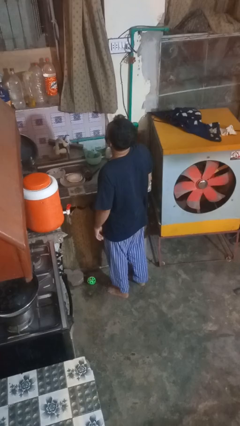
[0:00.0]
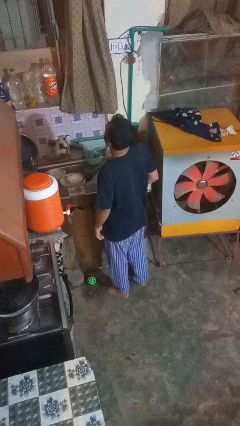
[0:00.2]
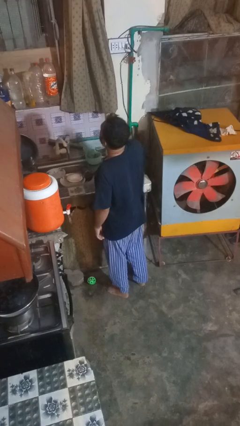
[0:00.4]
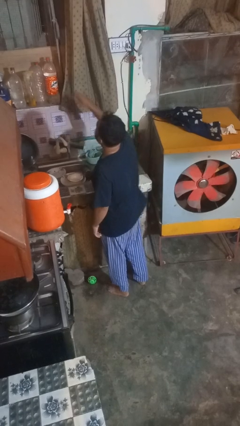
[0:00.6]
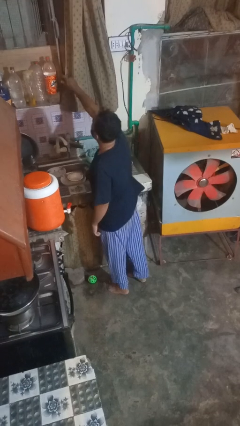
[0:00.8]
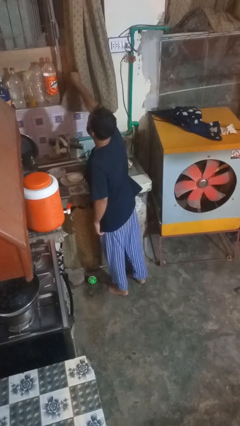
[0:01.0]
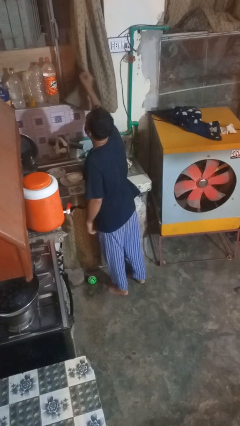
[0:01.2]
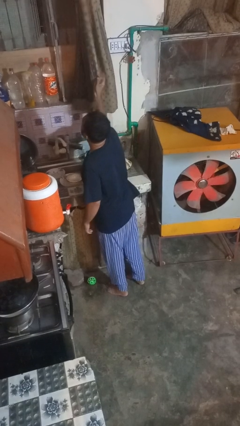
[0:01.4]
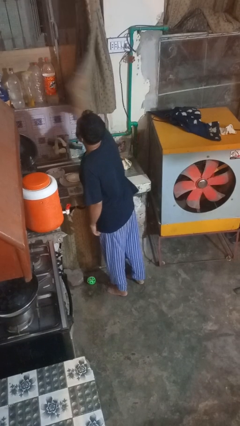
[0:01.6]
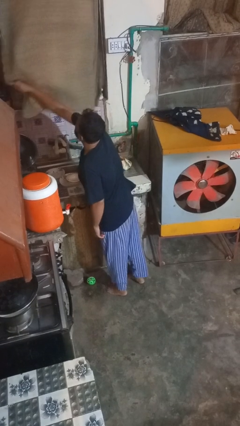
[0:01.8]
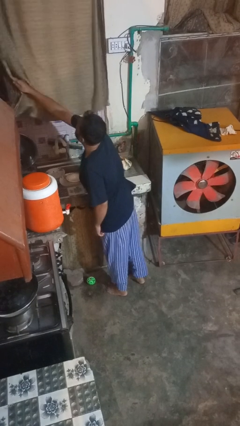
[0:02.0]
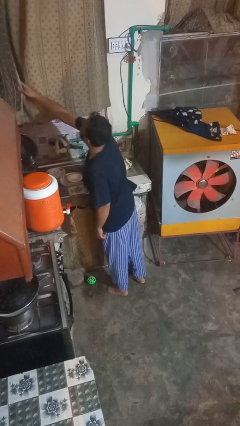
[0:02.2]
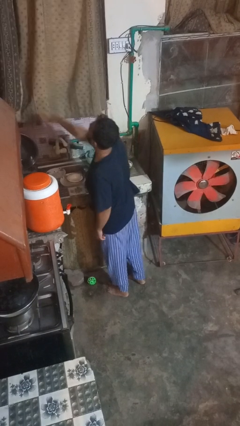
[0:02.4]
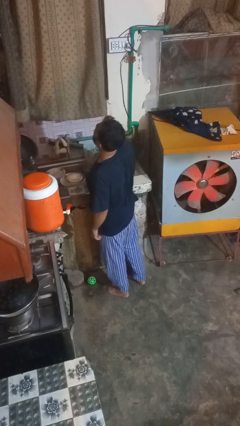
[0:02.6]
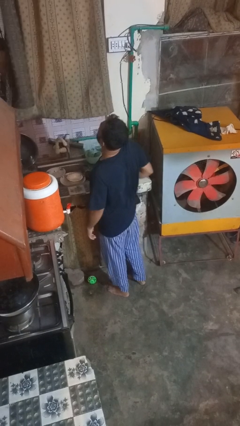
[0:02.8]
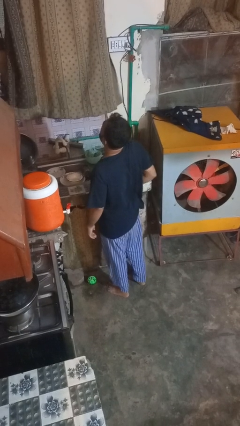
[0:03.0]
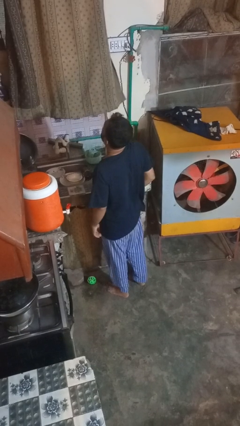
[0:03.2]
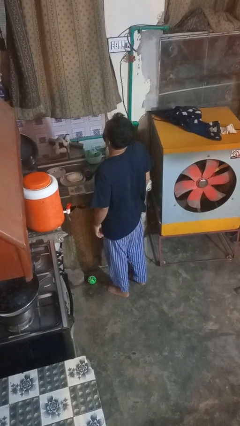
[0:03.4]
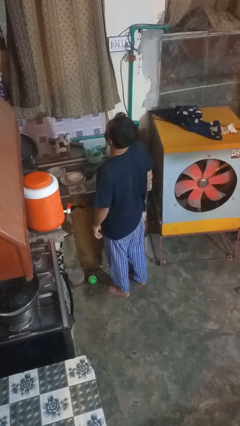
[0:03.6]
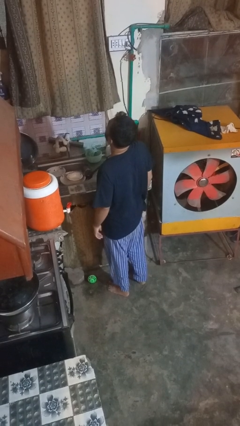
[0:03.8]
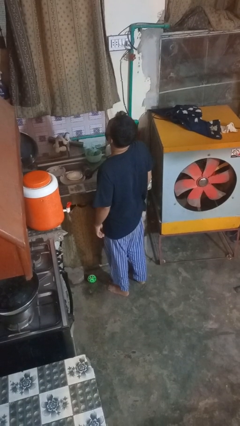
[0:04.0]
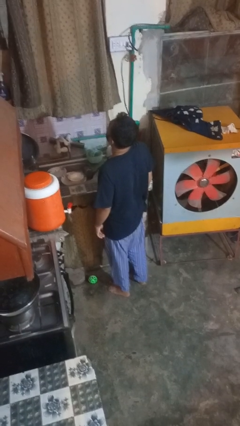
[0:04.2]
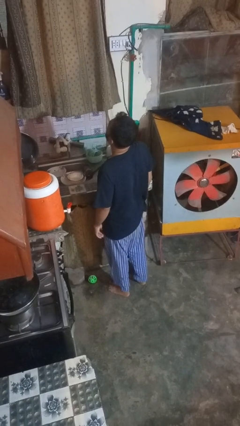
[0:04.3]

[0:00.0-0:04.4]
person closes curtains

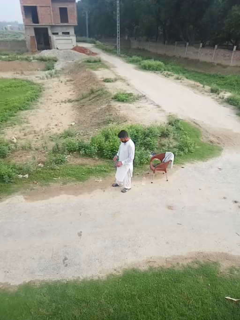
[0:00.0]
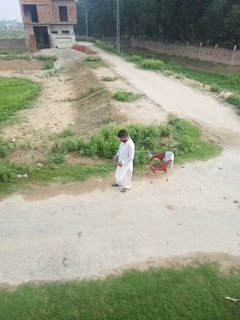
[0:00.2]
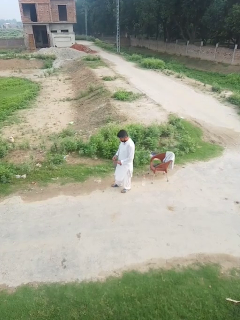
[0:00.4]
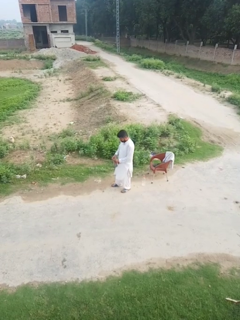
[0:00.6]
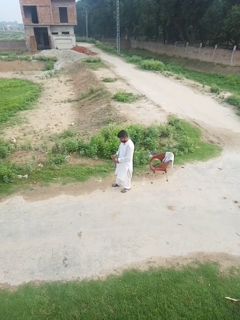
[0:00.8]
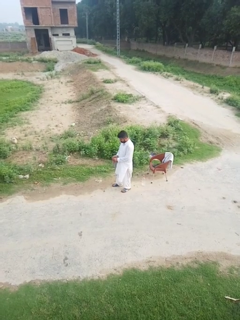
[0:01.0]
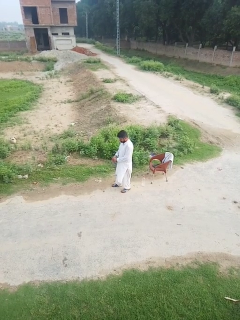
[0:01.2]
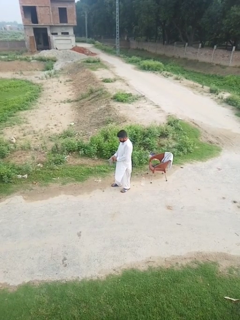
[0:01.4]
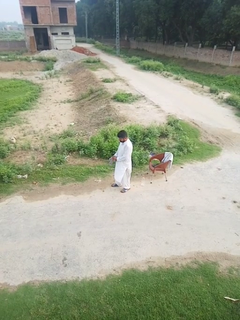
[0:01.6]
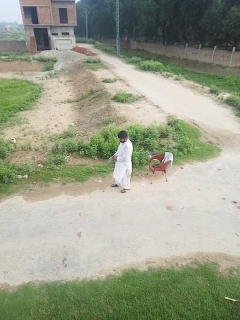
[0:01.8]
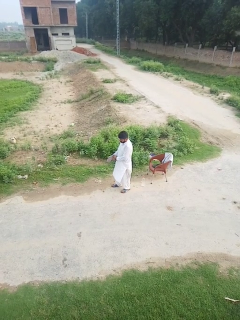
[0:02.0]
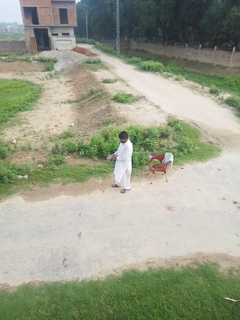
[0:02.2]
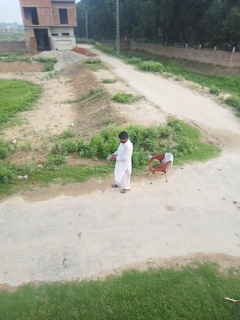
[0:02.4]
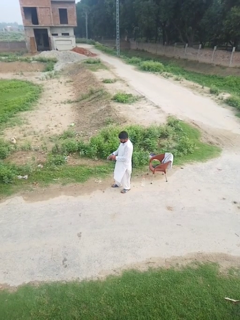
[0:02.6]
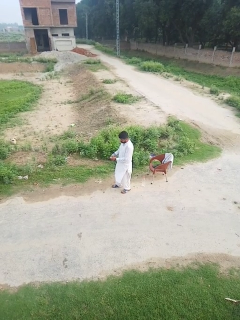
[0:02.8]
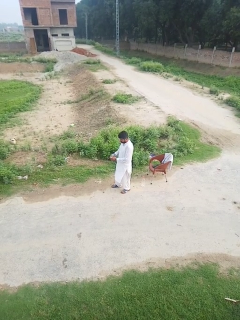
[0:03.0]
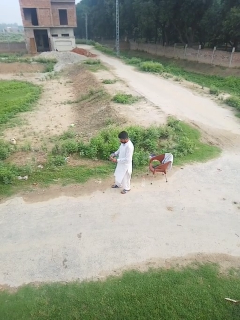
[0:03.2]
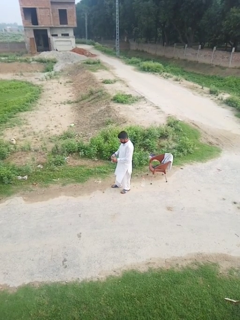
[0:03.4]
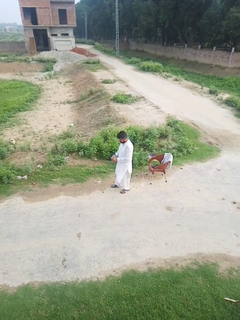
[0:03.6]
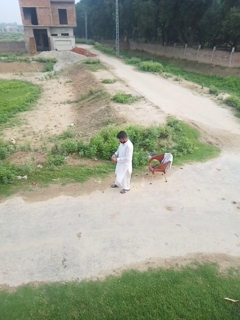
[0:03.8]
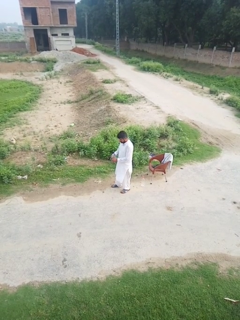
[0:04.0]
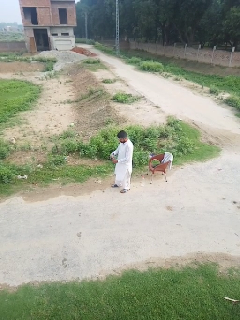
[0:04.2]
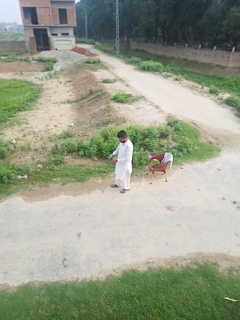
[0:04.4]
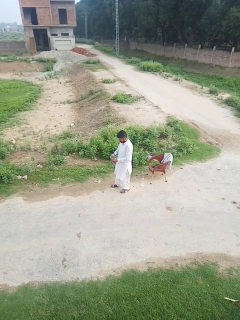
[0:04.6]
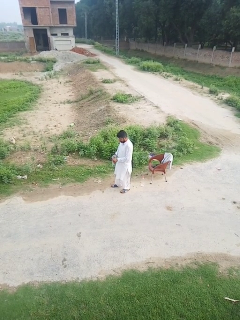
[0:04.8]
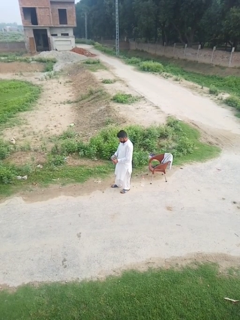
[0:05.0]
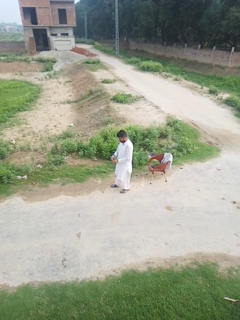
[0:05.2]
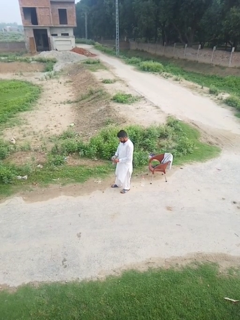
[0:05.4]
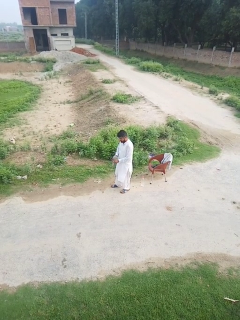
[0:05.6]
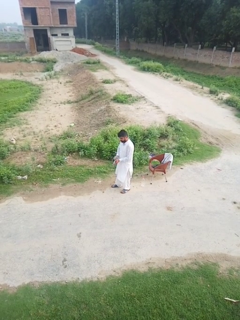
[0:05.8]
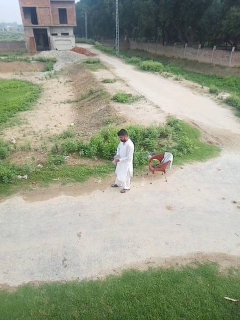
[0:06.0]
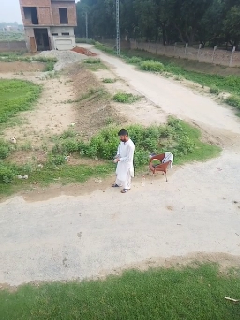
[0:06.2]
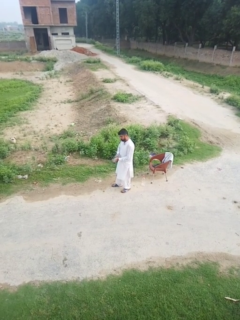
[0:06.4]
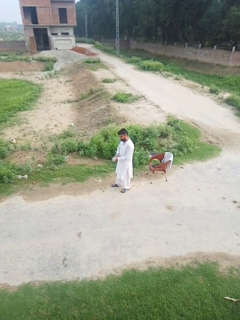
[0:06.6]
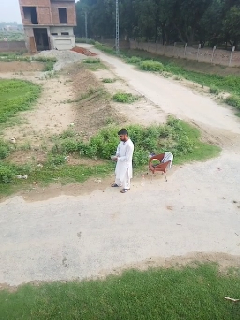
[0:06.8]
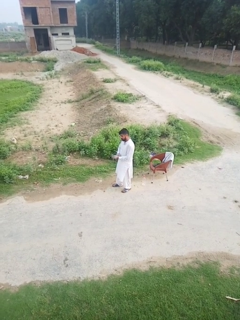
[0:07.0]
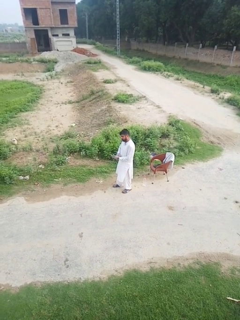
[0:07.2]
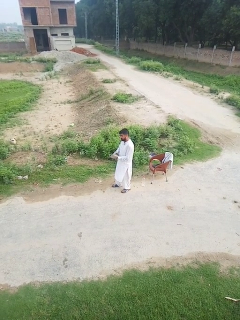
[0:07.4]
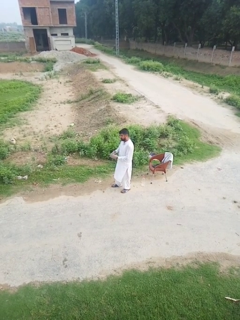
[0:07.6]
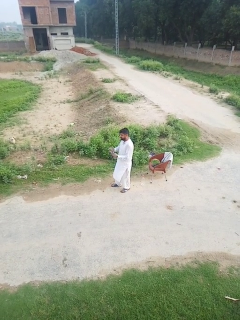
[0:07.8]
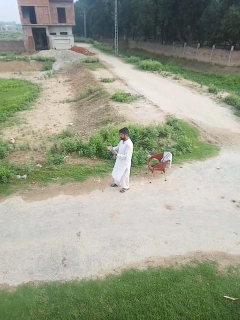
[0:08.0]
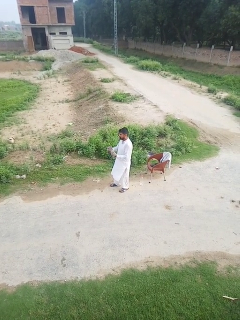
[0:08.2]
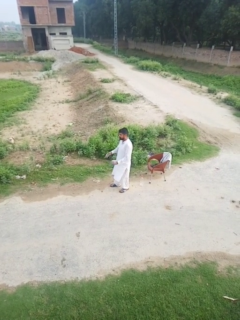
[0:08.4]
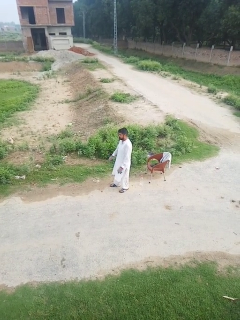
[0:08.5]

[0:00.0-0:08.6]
person puts on gloves

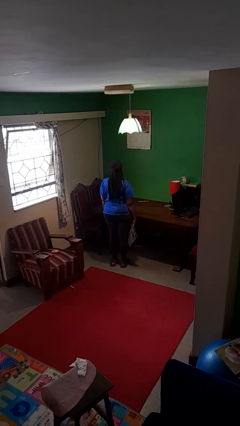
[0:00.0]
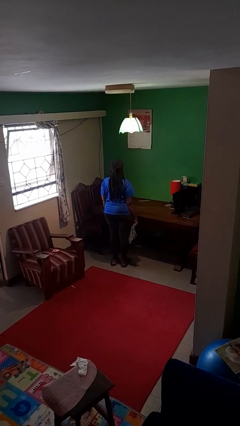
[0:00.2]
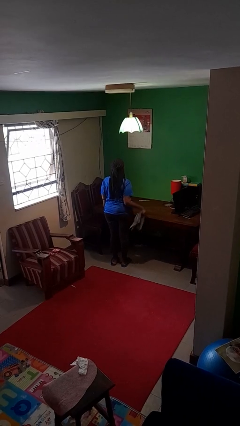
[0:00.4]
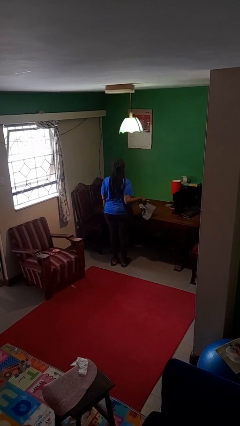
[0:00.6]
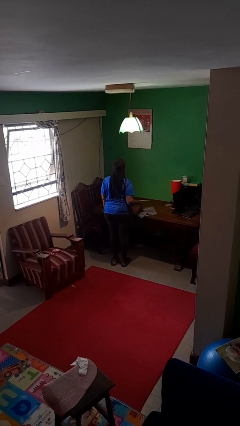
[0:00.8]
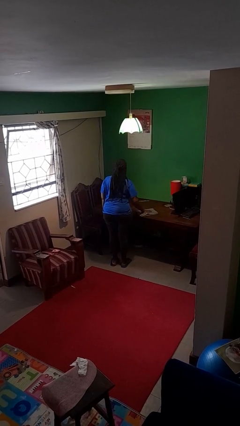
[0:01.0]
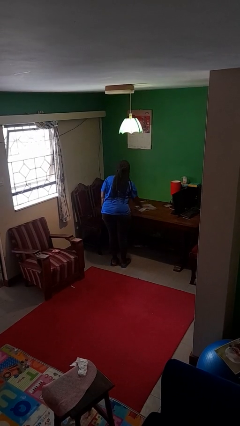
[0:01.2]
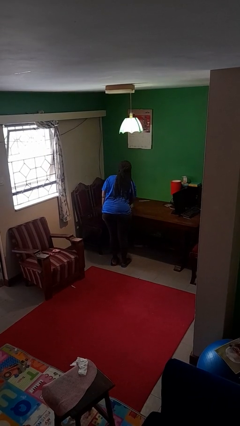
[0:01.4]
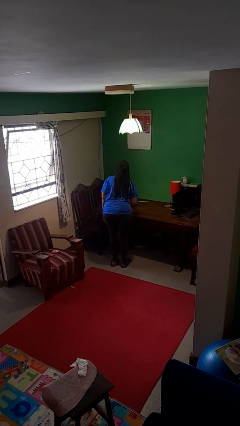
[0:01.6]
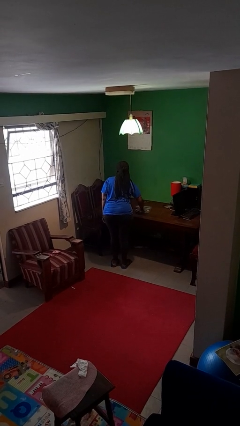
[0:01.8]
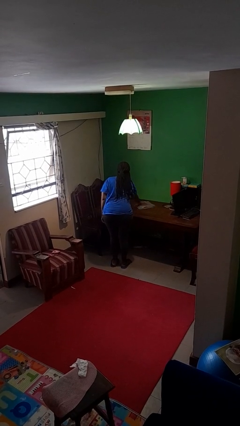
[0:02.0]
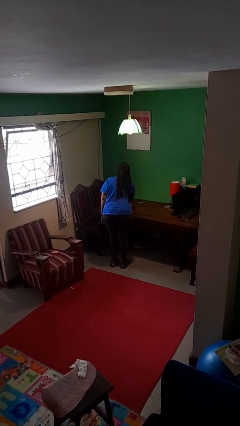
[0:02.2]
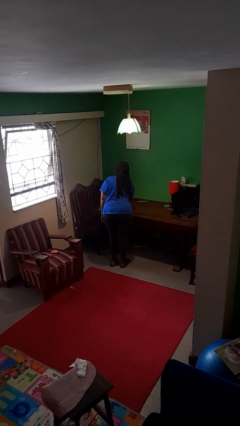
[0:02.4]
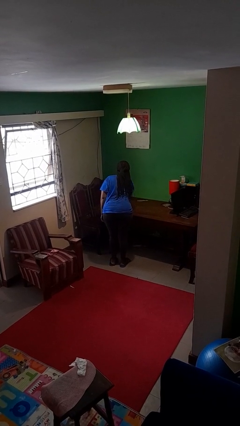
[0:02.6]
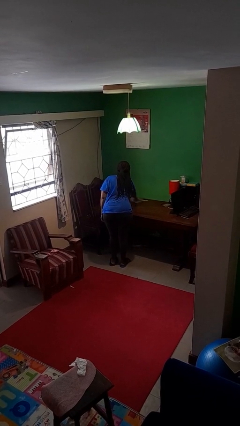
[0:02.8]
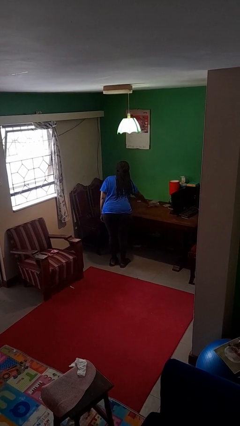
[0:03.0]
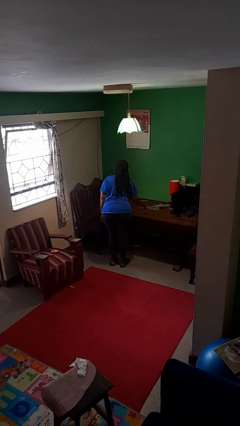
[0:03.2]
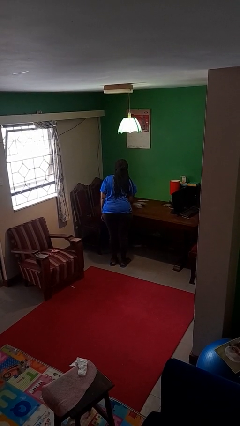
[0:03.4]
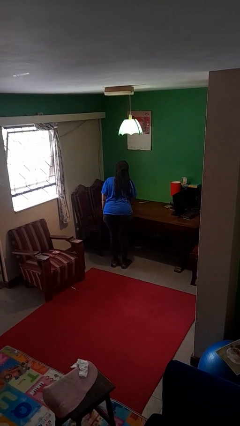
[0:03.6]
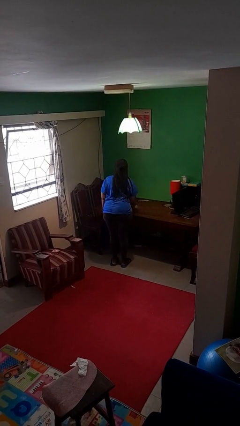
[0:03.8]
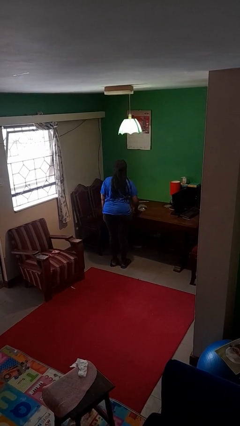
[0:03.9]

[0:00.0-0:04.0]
person cleans table with rag

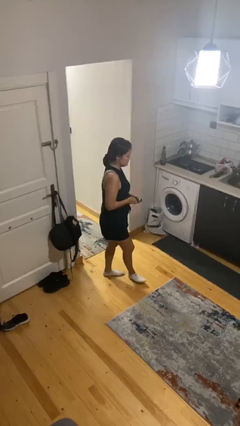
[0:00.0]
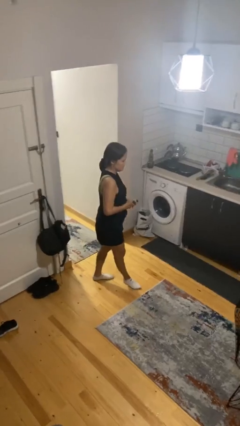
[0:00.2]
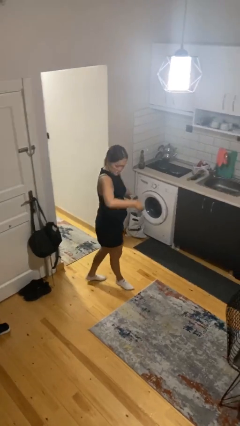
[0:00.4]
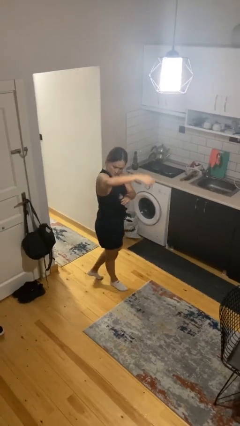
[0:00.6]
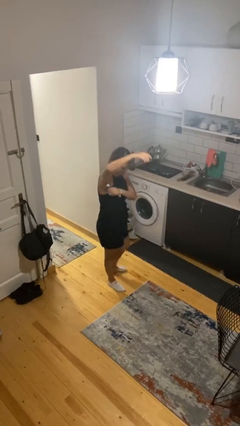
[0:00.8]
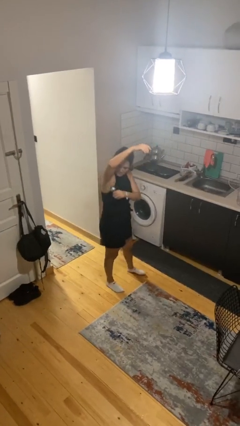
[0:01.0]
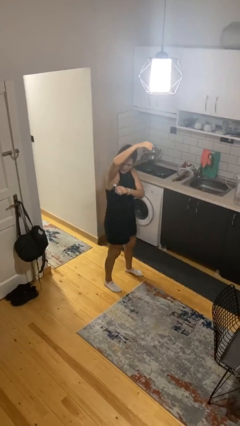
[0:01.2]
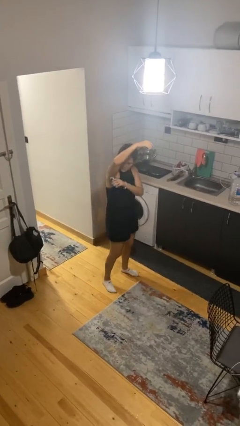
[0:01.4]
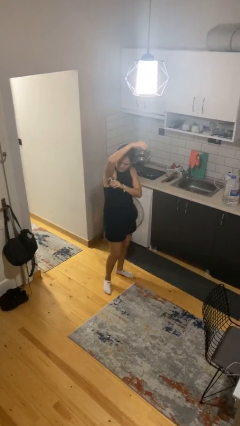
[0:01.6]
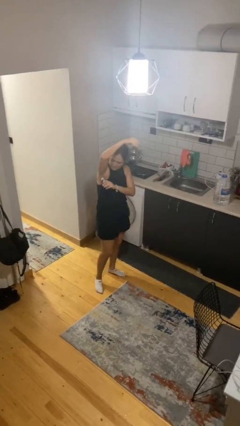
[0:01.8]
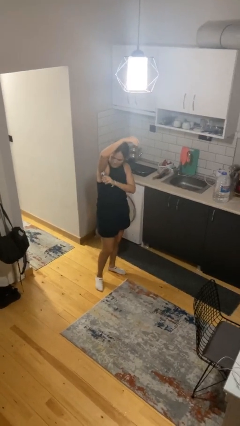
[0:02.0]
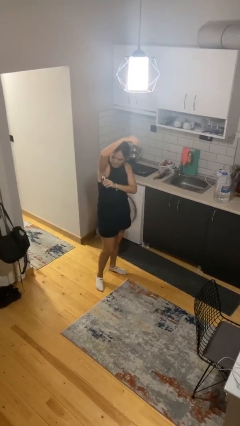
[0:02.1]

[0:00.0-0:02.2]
person applies deodorant

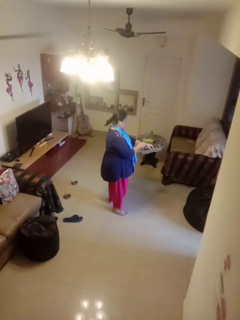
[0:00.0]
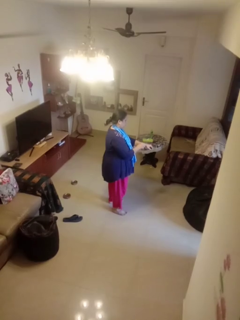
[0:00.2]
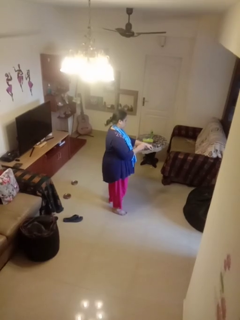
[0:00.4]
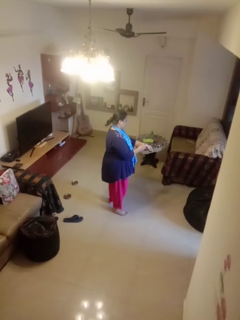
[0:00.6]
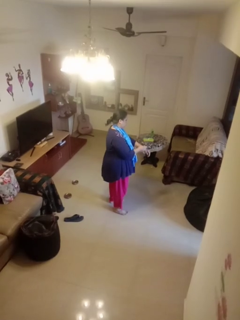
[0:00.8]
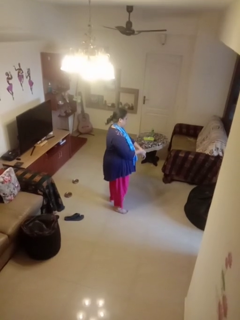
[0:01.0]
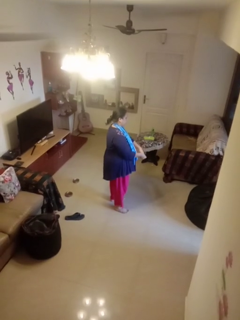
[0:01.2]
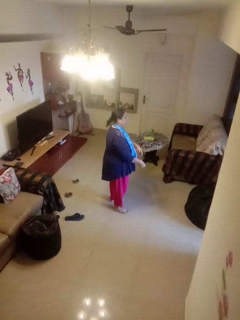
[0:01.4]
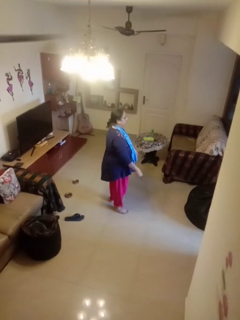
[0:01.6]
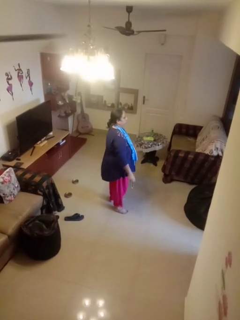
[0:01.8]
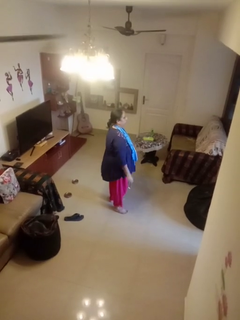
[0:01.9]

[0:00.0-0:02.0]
person takes off wristwatch
